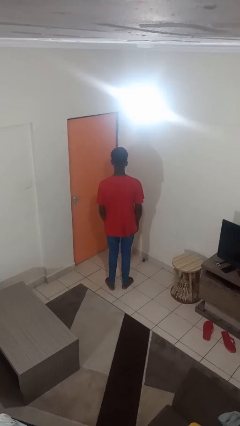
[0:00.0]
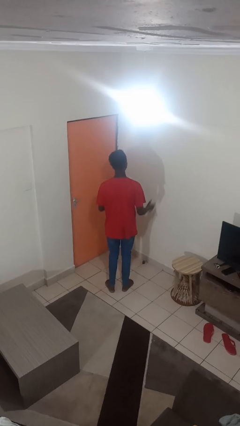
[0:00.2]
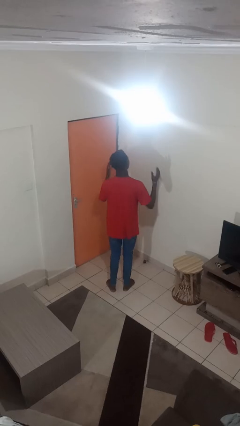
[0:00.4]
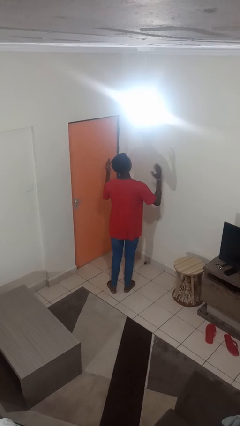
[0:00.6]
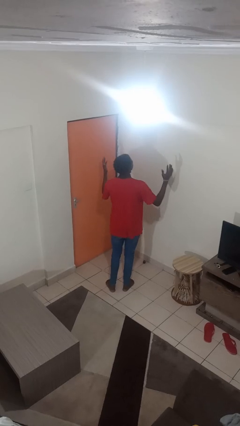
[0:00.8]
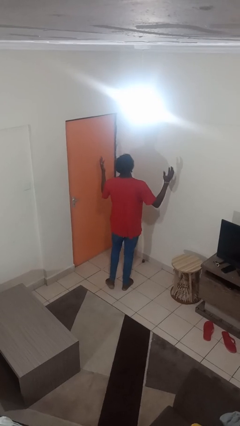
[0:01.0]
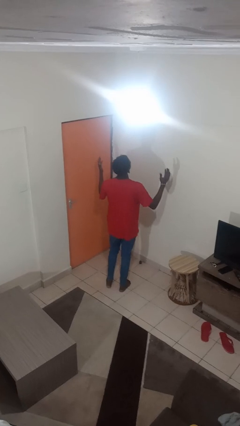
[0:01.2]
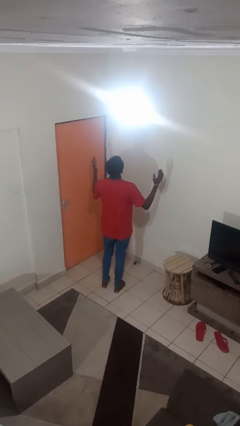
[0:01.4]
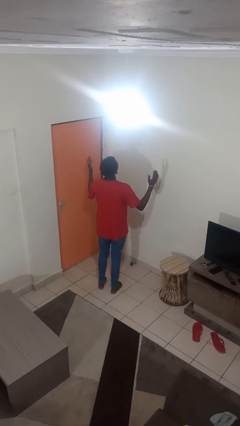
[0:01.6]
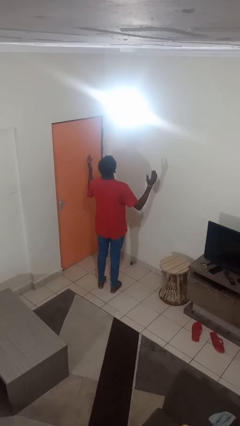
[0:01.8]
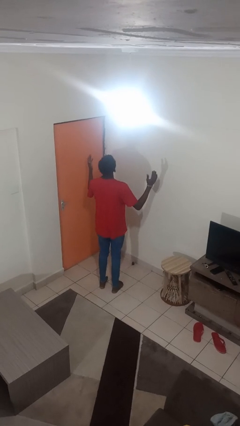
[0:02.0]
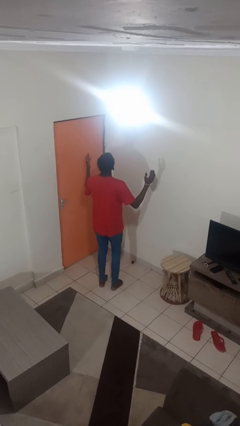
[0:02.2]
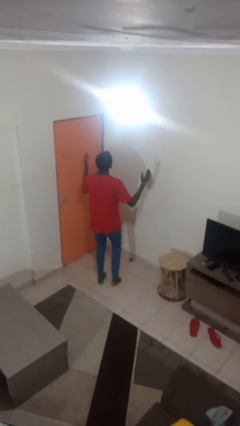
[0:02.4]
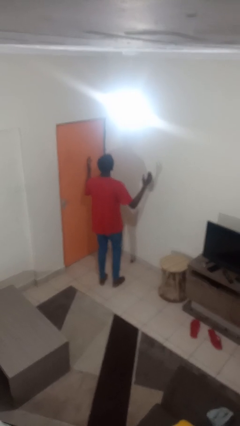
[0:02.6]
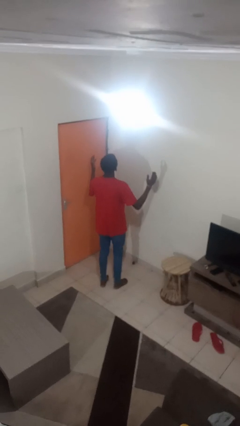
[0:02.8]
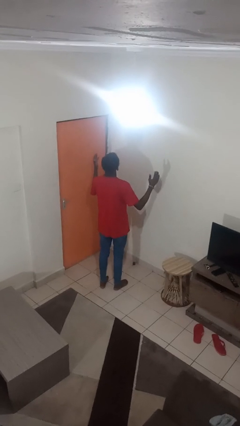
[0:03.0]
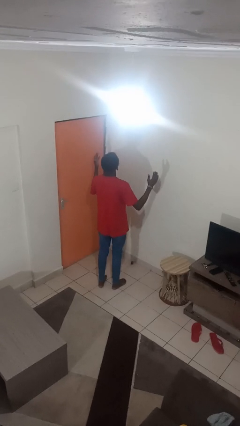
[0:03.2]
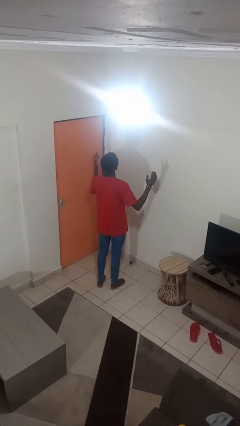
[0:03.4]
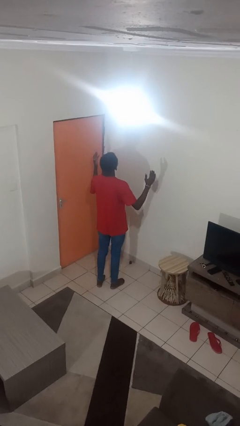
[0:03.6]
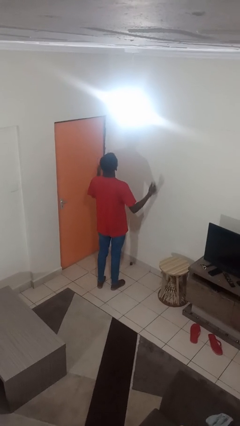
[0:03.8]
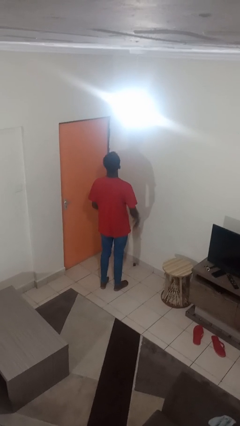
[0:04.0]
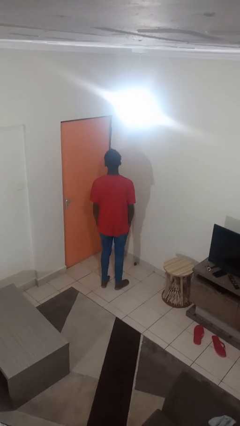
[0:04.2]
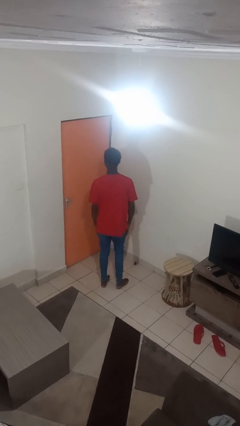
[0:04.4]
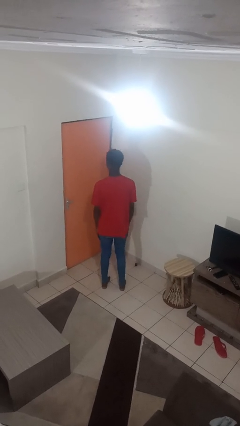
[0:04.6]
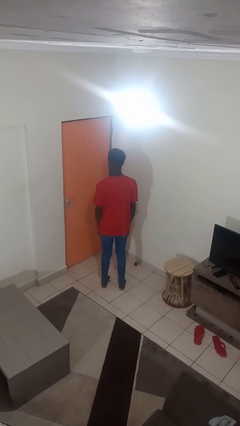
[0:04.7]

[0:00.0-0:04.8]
person prays

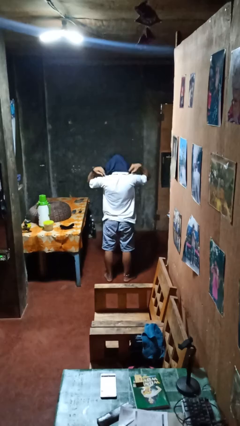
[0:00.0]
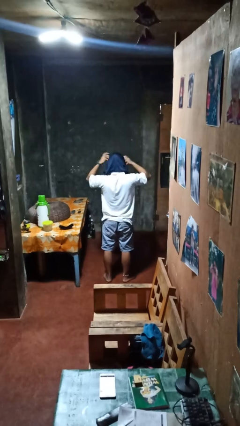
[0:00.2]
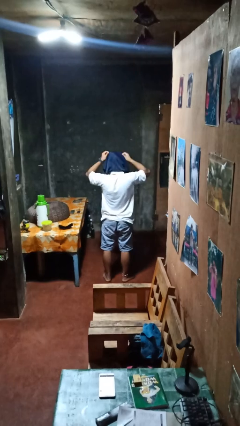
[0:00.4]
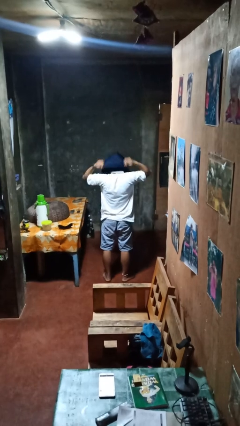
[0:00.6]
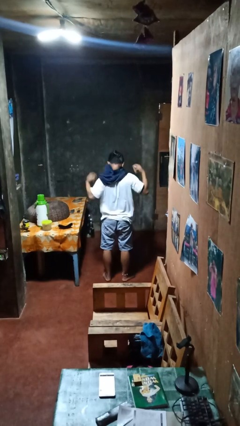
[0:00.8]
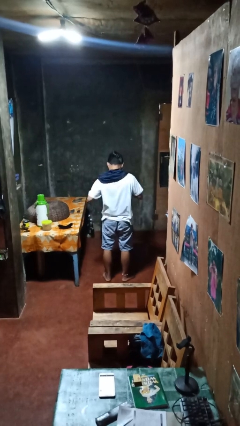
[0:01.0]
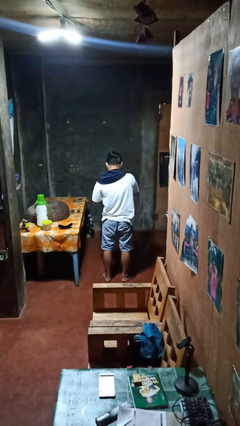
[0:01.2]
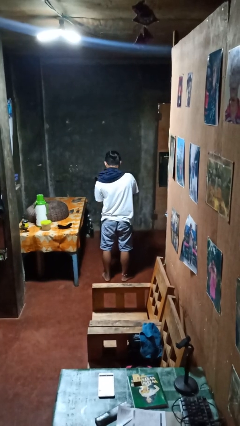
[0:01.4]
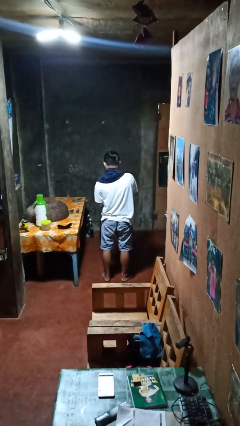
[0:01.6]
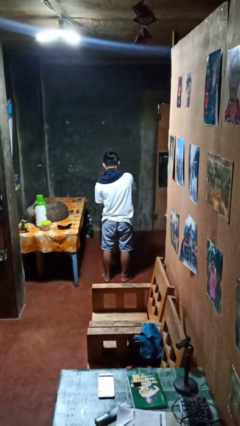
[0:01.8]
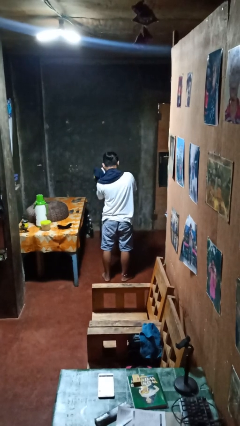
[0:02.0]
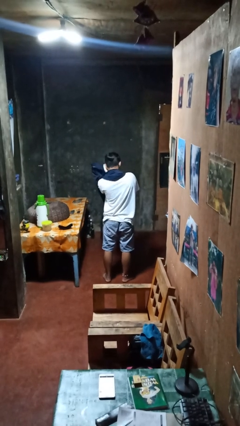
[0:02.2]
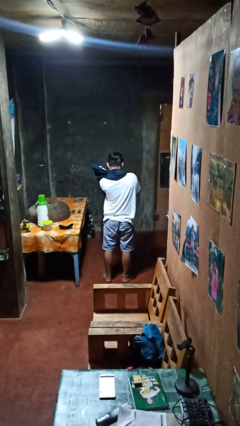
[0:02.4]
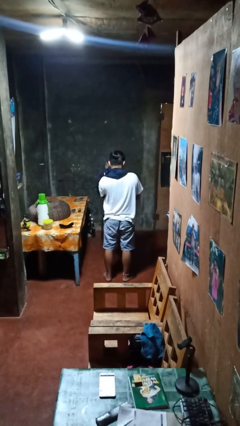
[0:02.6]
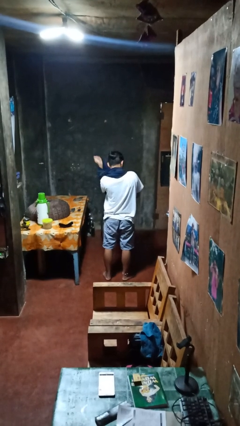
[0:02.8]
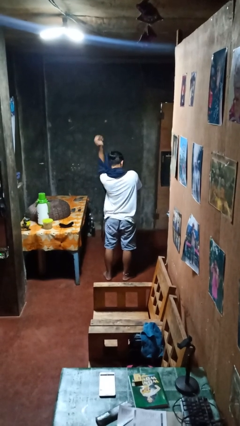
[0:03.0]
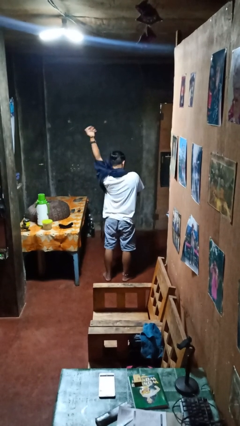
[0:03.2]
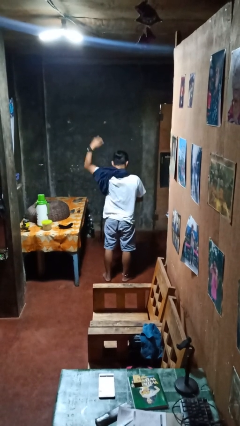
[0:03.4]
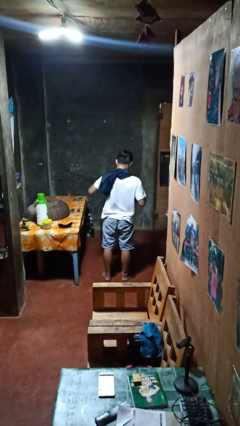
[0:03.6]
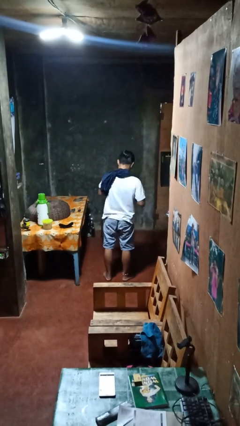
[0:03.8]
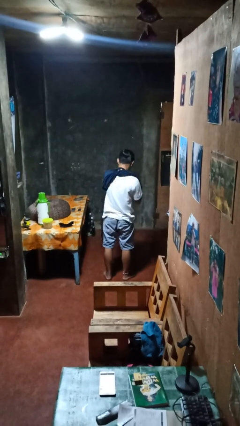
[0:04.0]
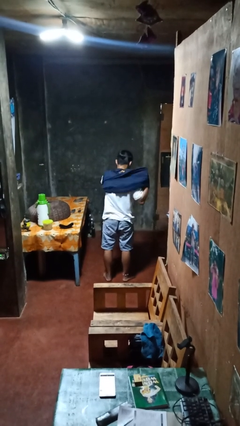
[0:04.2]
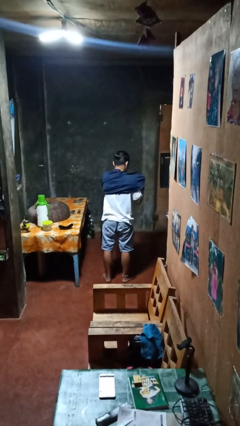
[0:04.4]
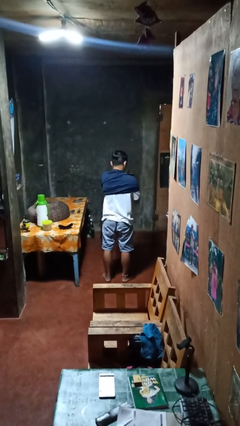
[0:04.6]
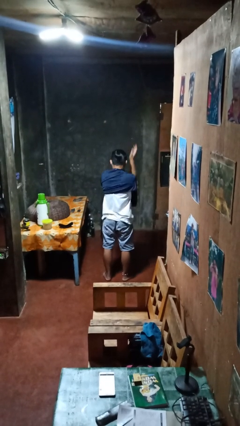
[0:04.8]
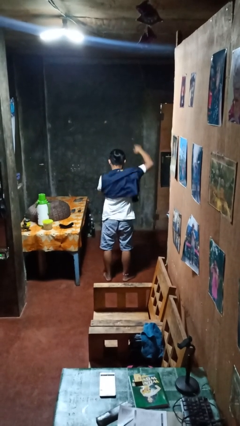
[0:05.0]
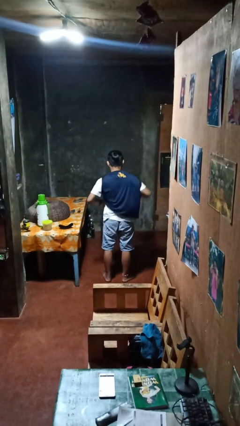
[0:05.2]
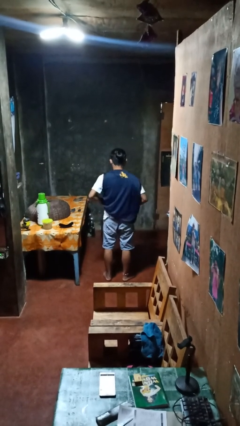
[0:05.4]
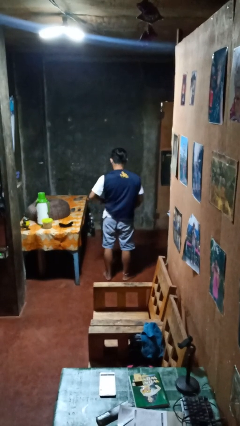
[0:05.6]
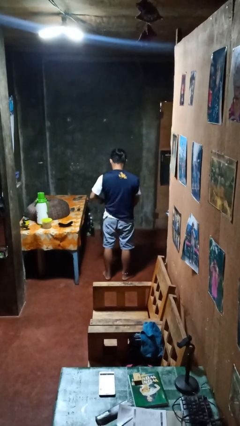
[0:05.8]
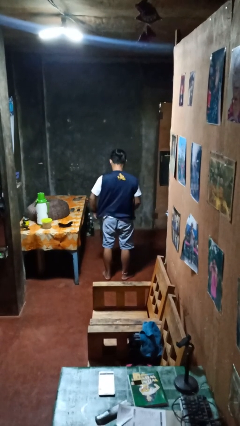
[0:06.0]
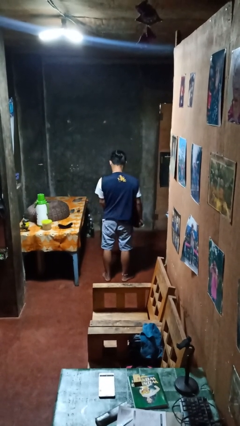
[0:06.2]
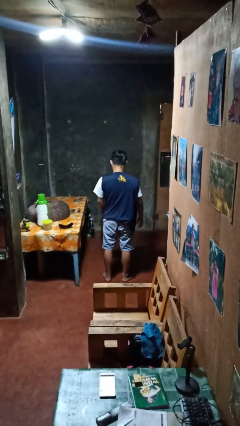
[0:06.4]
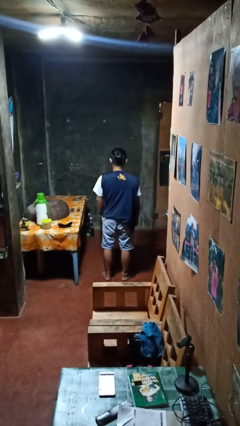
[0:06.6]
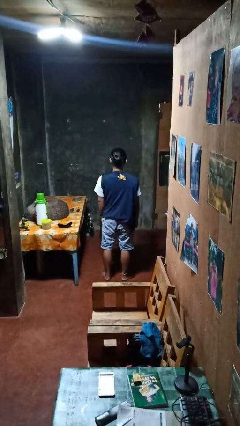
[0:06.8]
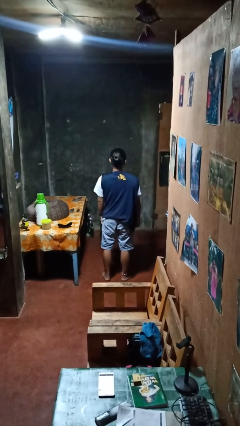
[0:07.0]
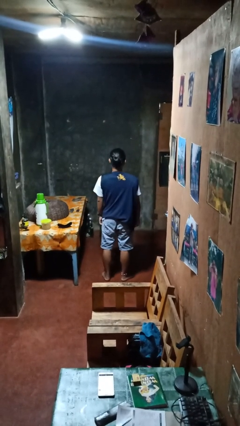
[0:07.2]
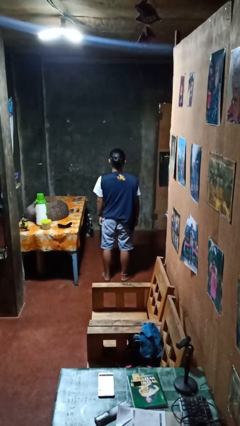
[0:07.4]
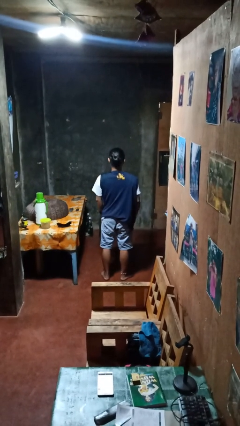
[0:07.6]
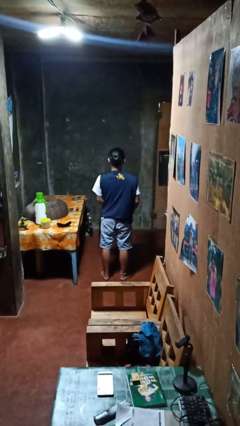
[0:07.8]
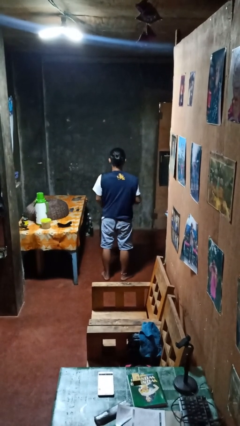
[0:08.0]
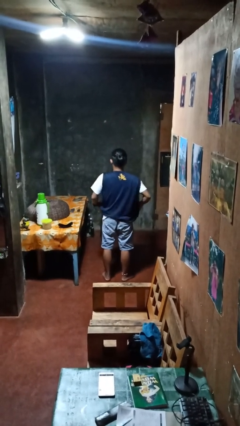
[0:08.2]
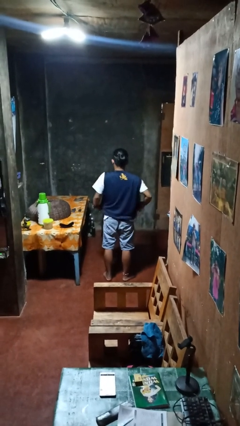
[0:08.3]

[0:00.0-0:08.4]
person puts on shirt

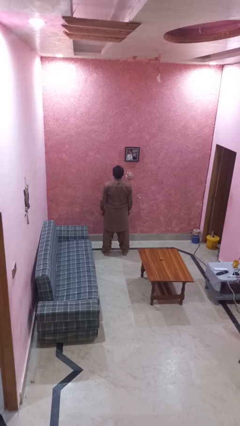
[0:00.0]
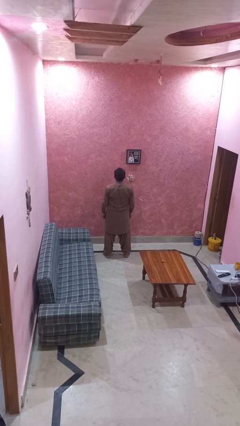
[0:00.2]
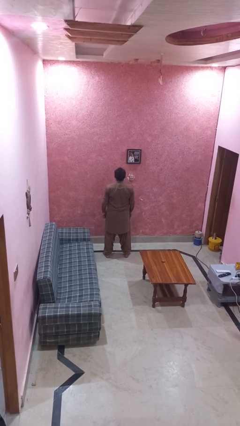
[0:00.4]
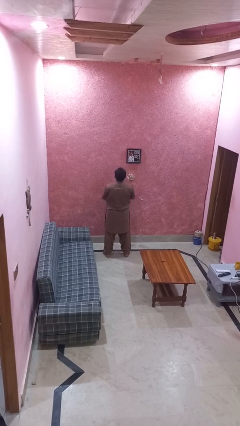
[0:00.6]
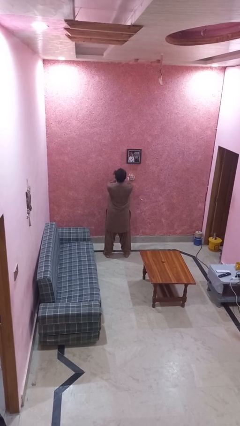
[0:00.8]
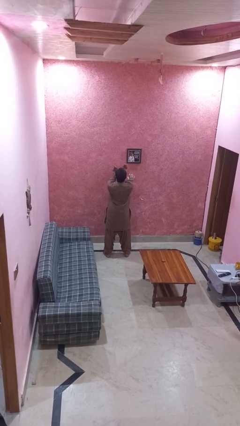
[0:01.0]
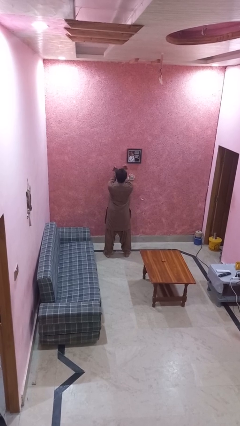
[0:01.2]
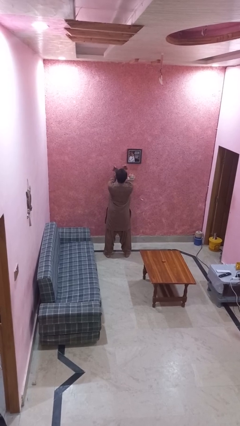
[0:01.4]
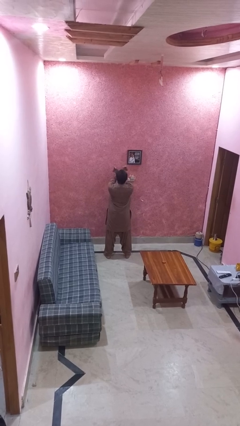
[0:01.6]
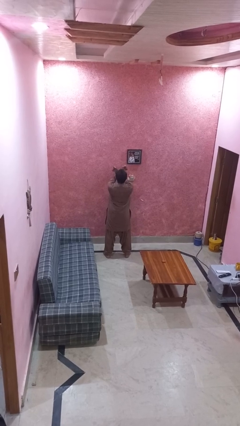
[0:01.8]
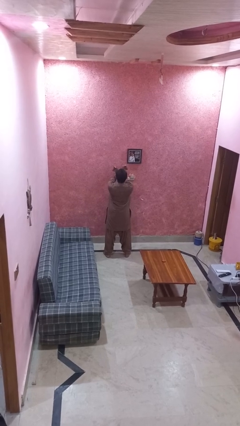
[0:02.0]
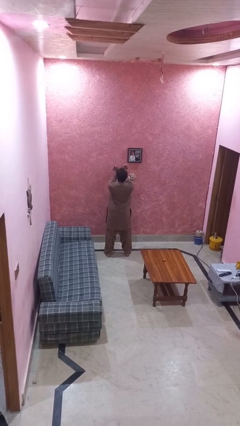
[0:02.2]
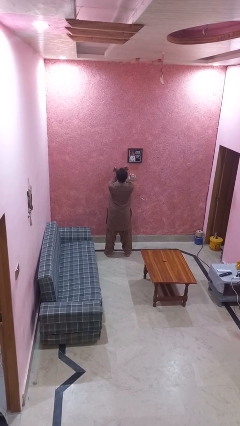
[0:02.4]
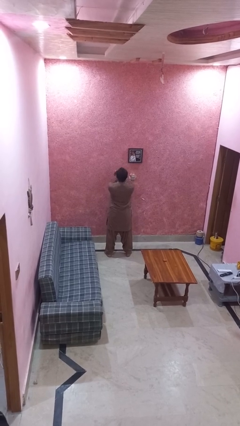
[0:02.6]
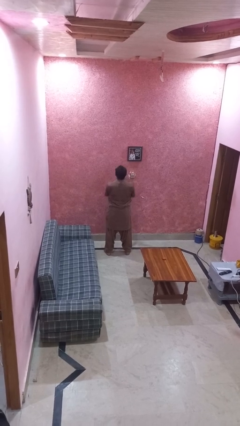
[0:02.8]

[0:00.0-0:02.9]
person gestures arms x

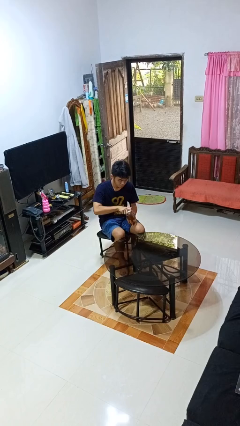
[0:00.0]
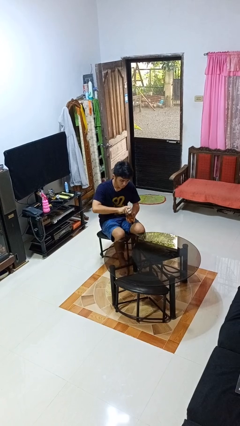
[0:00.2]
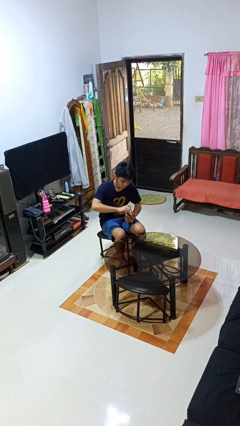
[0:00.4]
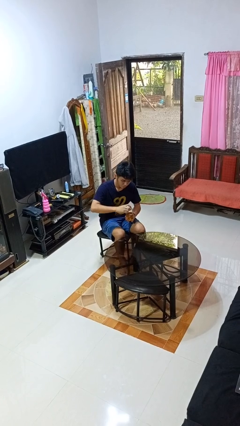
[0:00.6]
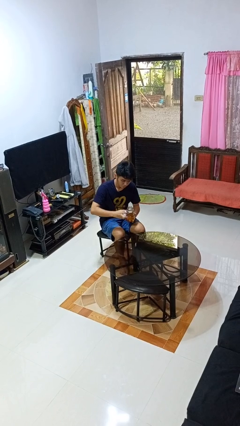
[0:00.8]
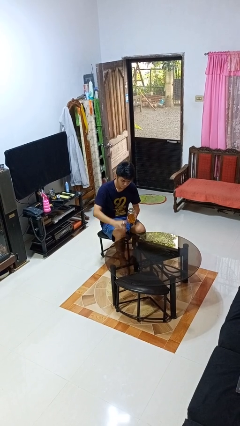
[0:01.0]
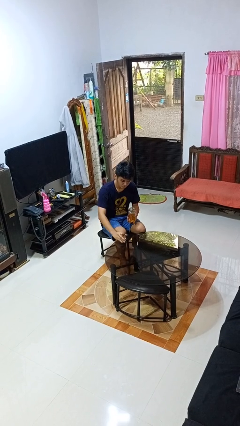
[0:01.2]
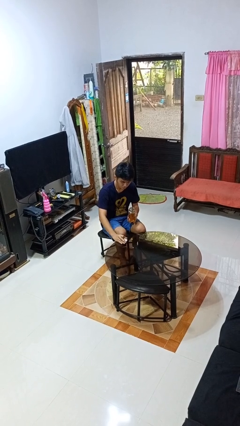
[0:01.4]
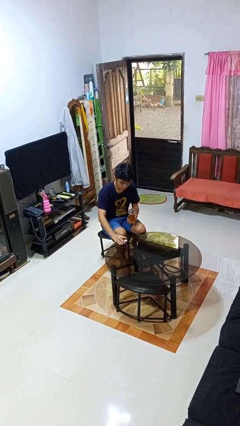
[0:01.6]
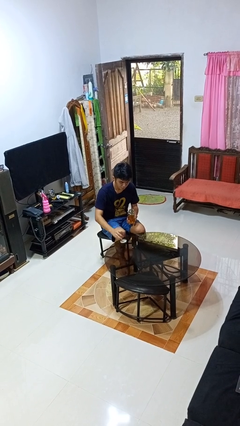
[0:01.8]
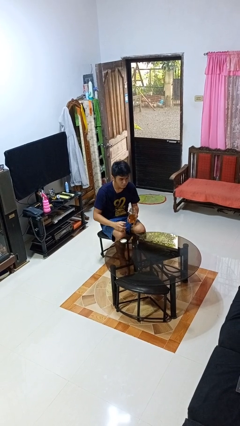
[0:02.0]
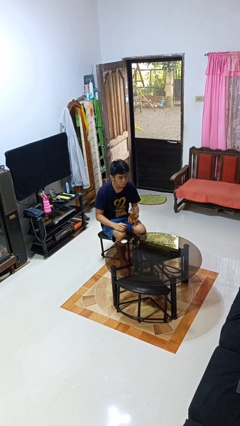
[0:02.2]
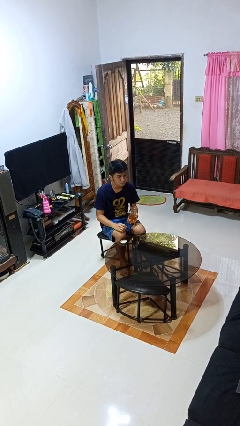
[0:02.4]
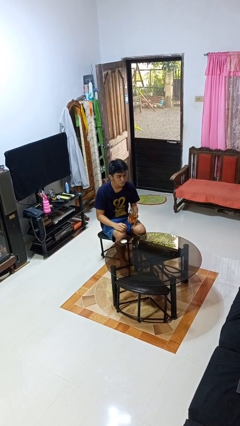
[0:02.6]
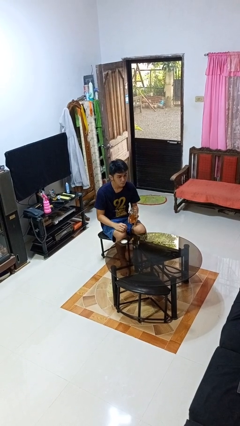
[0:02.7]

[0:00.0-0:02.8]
person opens jar
